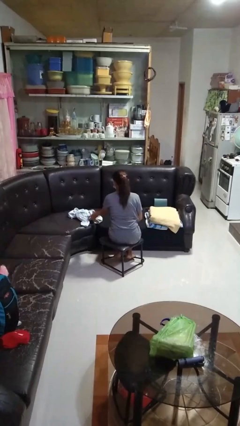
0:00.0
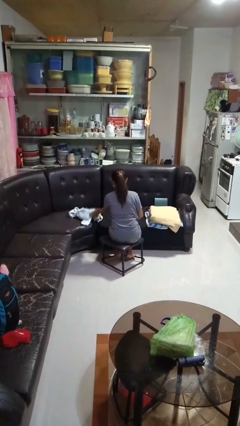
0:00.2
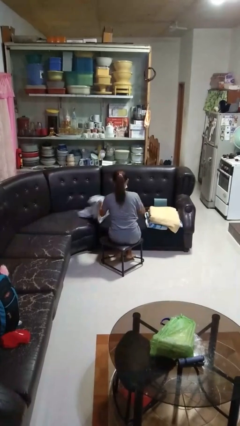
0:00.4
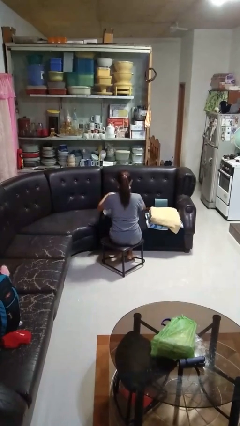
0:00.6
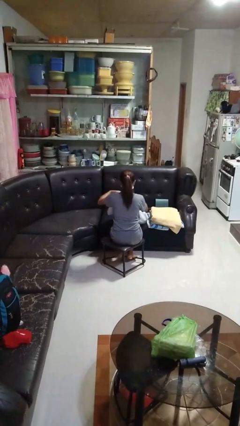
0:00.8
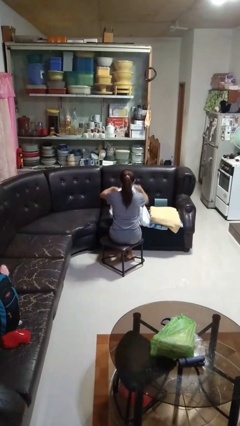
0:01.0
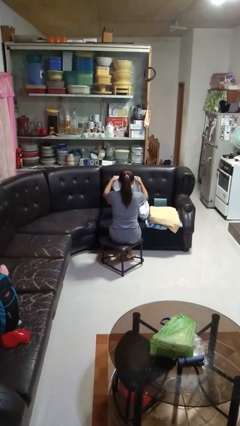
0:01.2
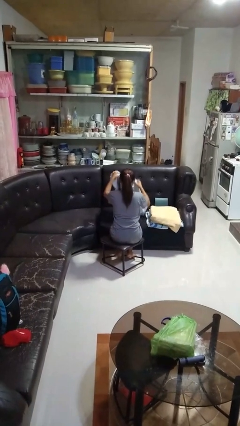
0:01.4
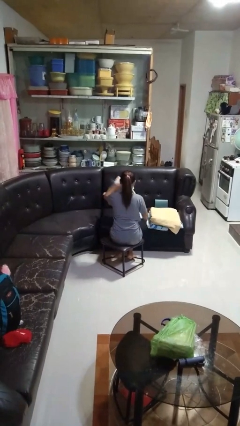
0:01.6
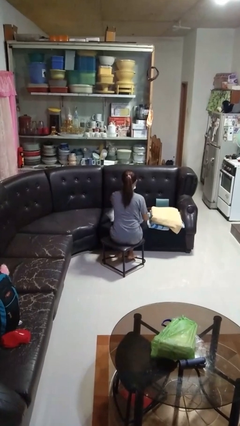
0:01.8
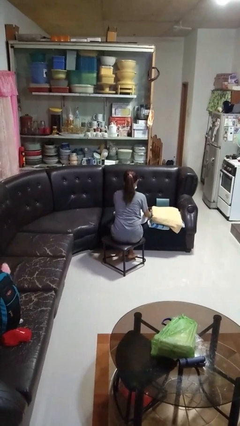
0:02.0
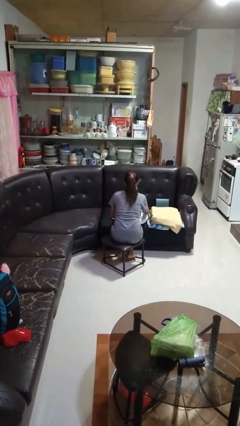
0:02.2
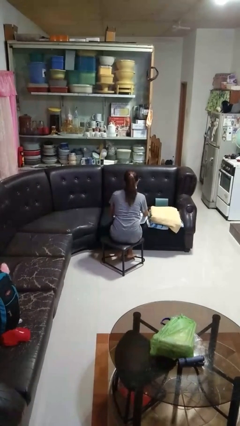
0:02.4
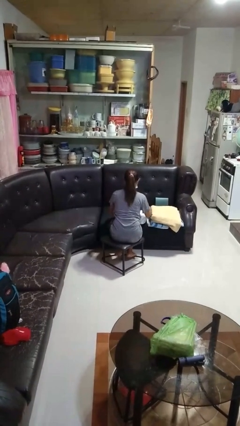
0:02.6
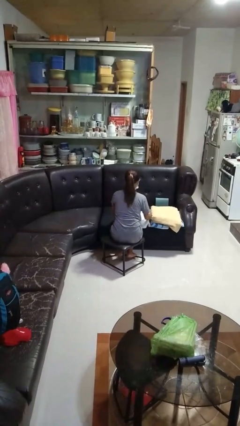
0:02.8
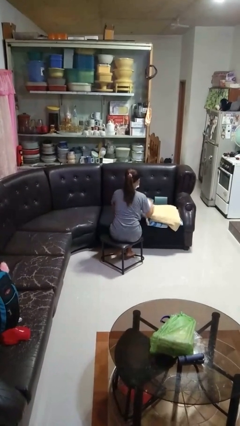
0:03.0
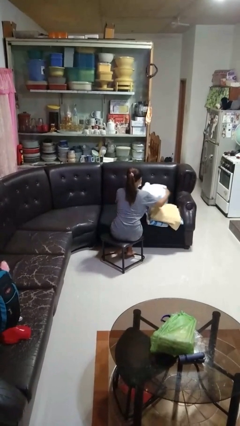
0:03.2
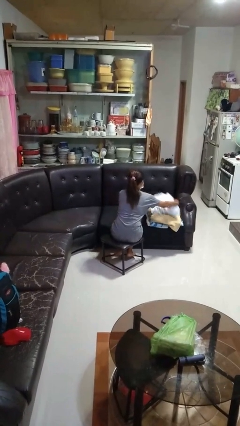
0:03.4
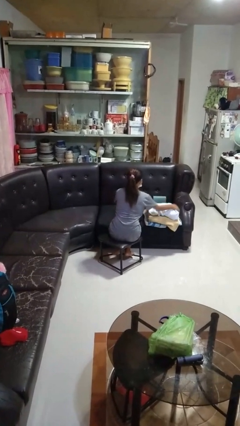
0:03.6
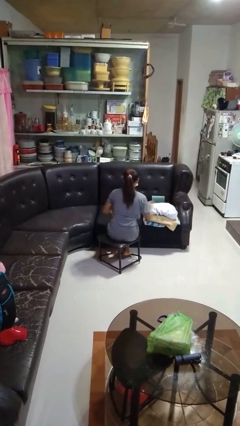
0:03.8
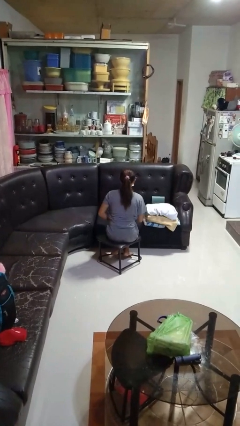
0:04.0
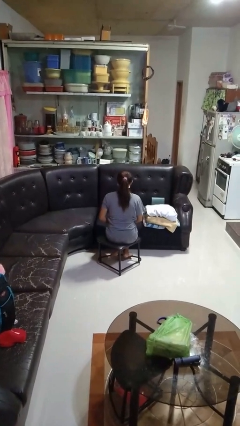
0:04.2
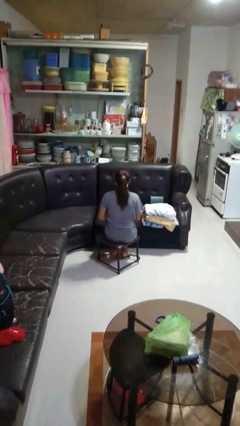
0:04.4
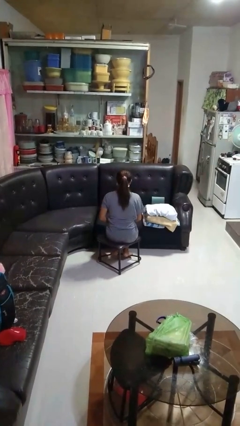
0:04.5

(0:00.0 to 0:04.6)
person folds towel

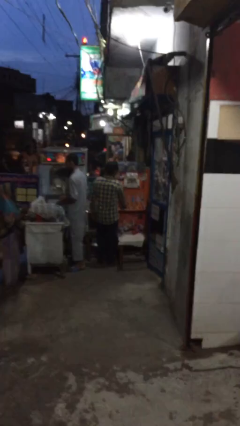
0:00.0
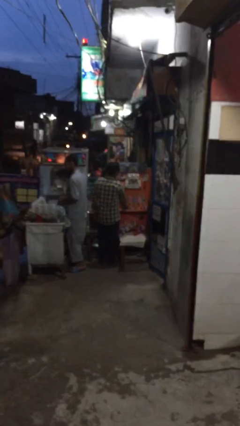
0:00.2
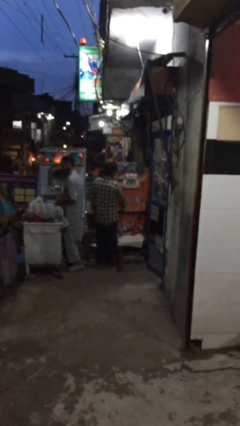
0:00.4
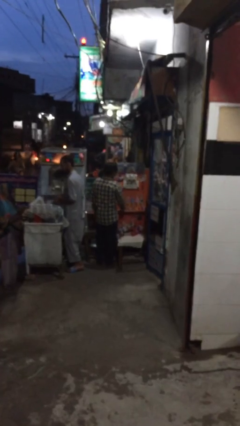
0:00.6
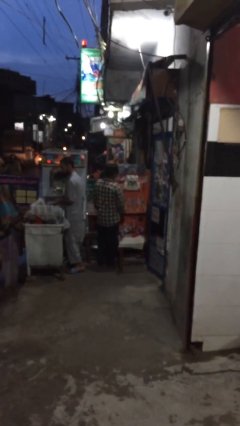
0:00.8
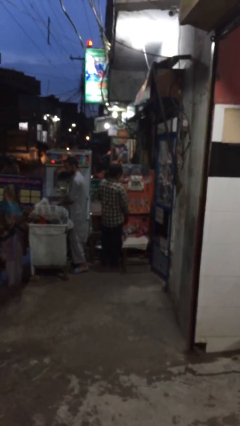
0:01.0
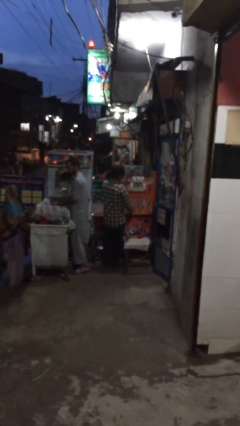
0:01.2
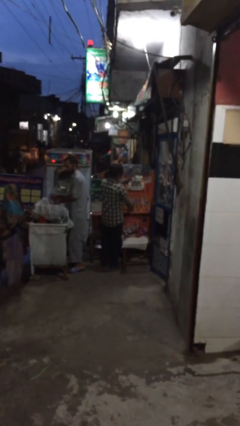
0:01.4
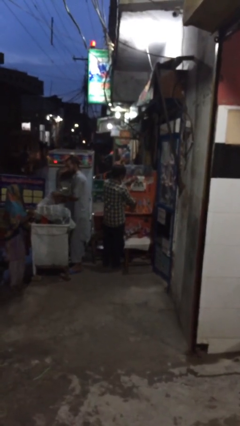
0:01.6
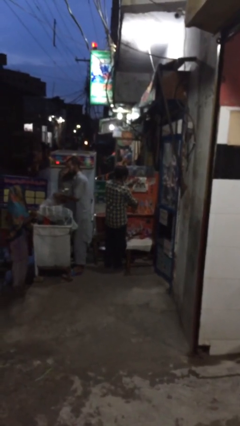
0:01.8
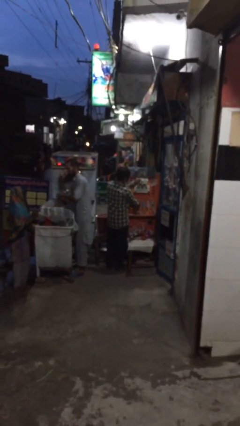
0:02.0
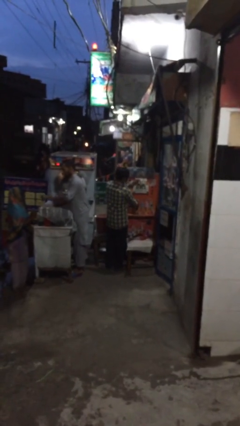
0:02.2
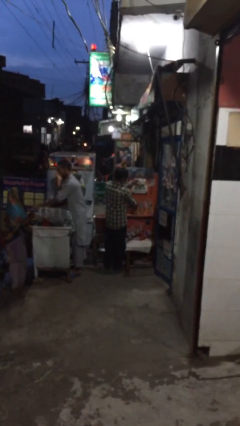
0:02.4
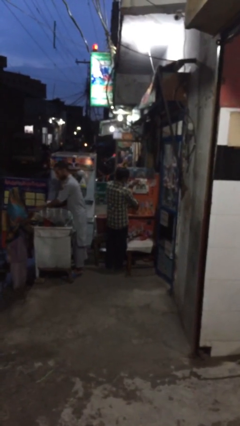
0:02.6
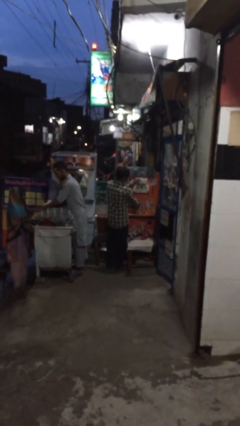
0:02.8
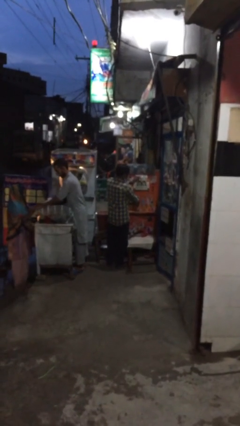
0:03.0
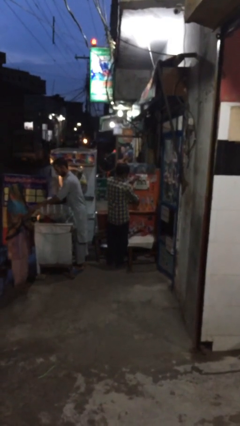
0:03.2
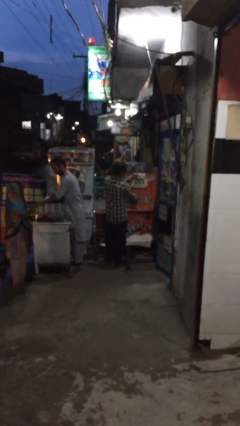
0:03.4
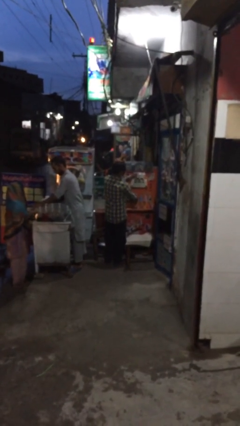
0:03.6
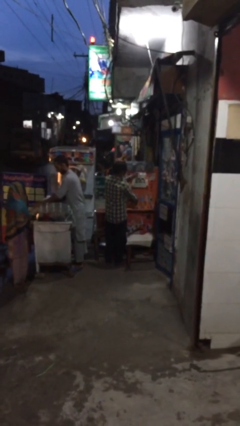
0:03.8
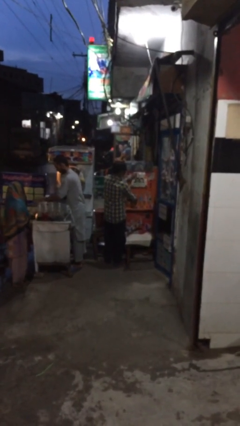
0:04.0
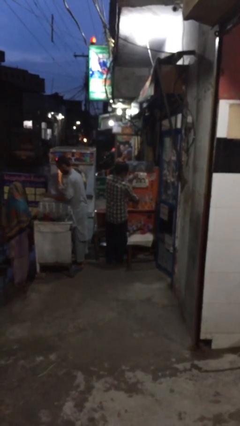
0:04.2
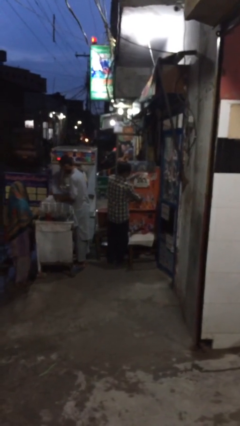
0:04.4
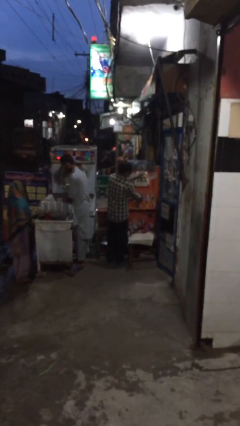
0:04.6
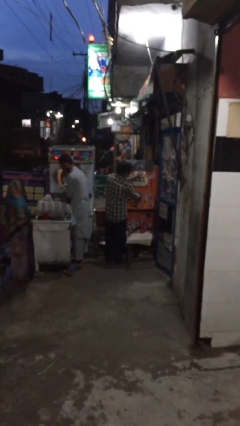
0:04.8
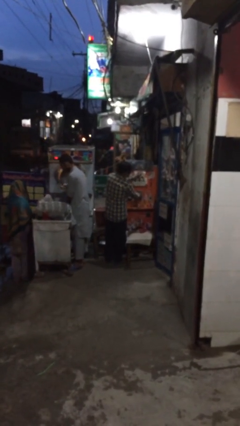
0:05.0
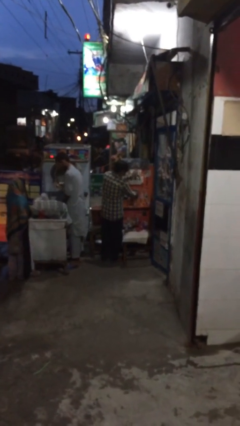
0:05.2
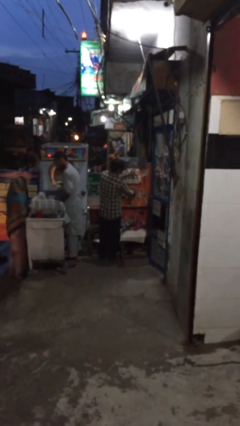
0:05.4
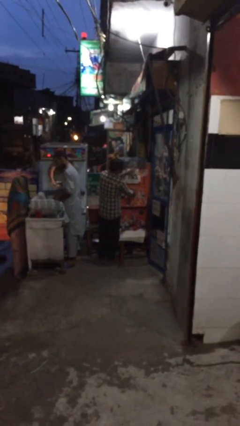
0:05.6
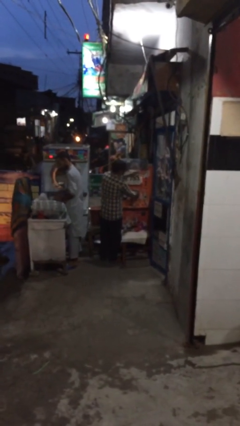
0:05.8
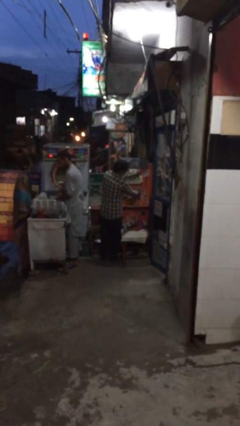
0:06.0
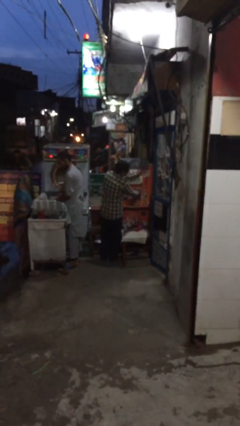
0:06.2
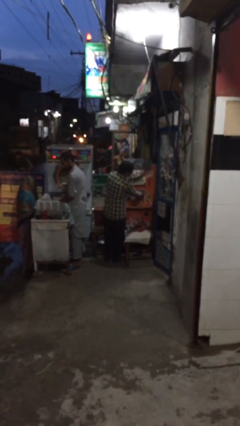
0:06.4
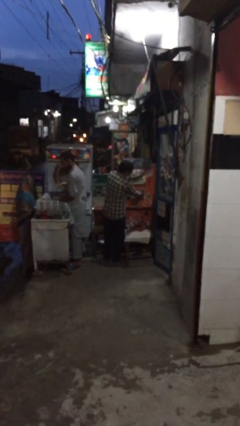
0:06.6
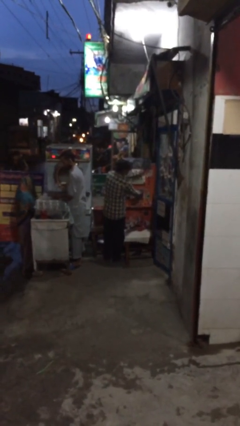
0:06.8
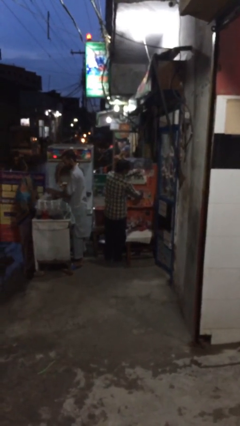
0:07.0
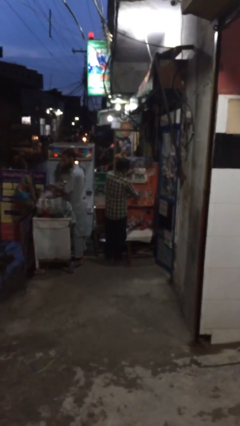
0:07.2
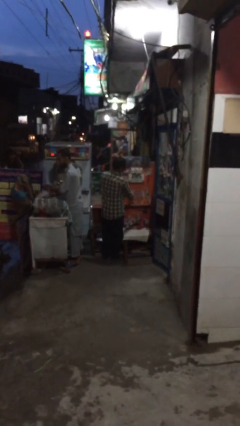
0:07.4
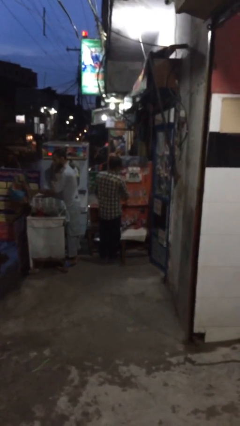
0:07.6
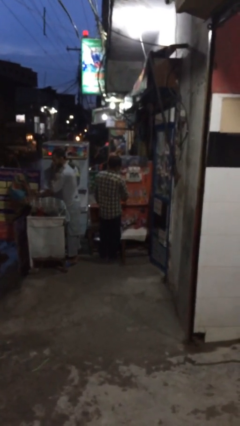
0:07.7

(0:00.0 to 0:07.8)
person purchases from machine

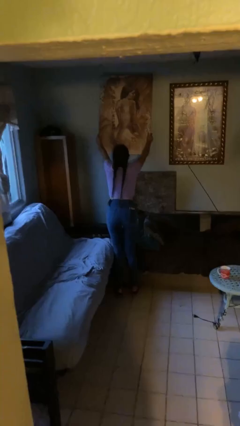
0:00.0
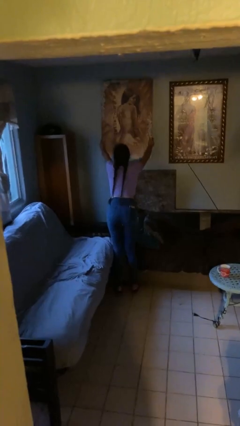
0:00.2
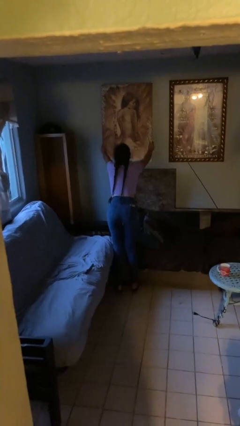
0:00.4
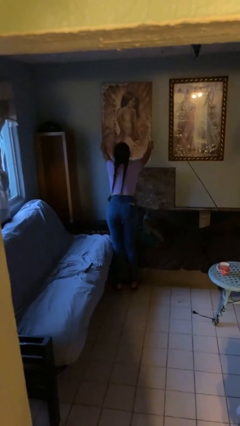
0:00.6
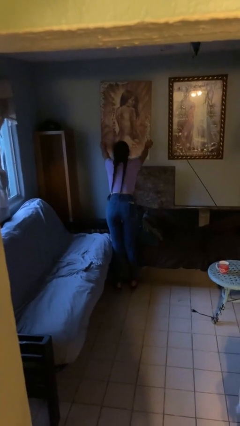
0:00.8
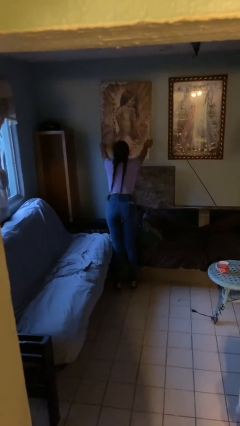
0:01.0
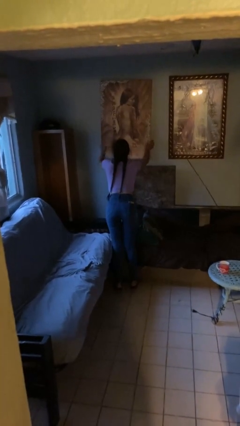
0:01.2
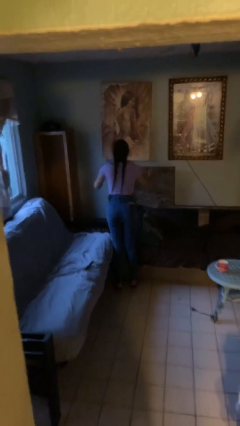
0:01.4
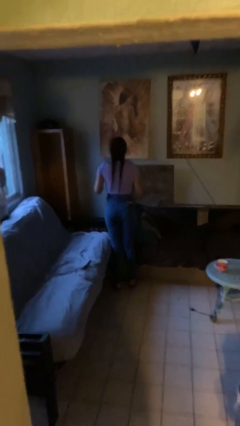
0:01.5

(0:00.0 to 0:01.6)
person puts up picture frame

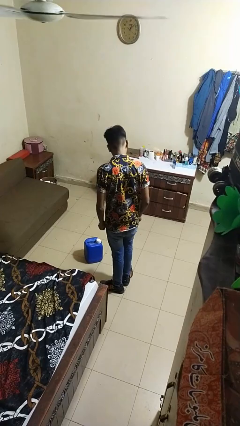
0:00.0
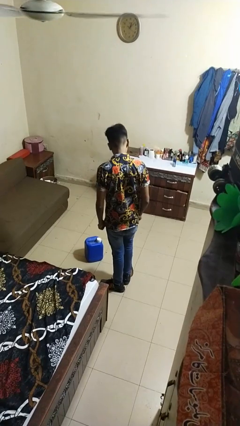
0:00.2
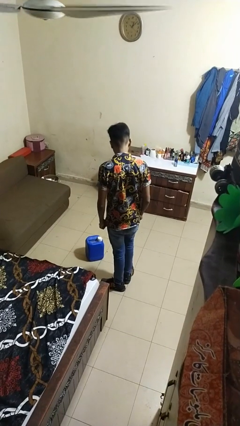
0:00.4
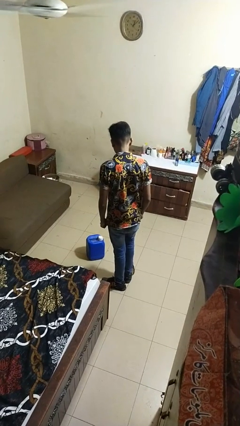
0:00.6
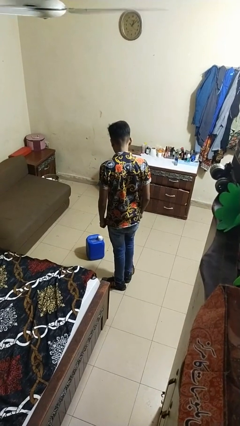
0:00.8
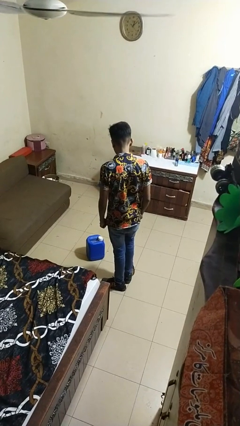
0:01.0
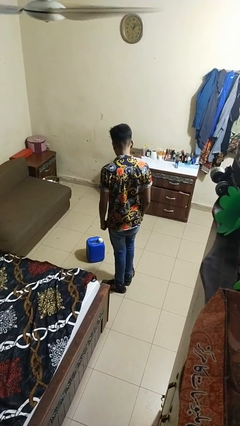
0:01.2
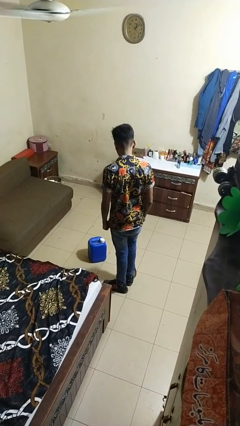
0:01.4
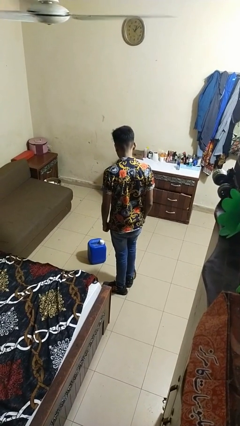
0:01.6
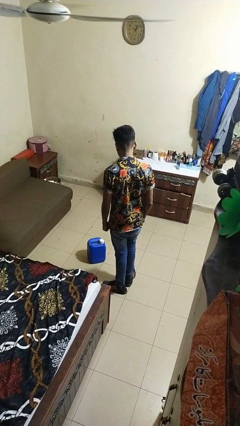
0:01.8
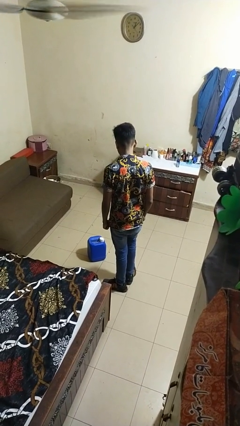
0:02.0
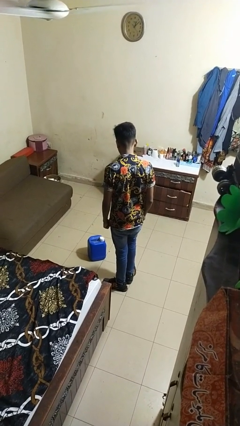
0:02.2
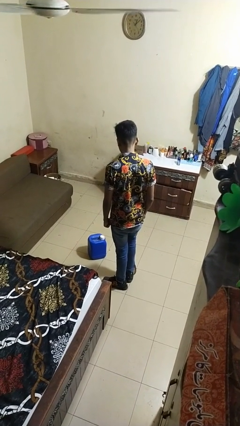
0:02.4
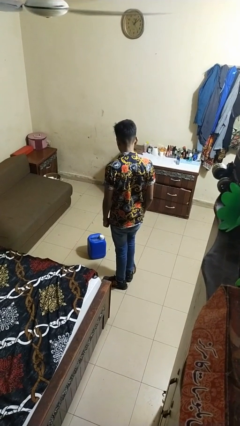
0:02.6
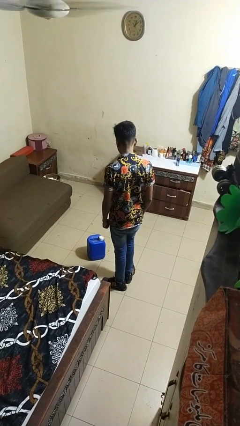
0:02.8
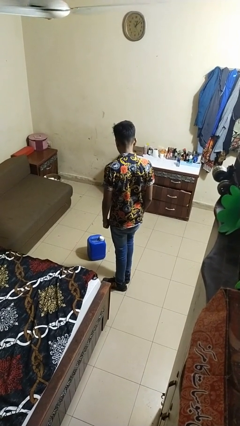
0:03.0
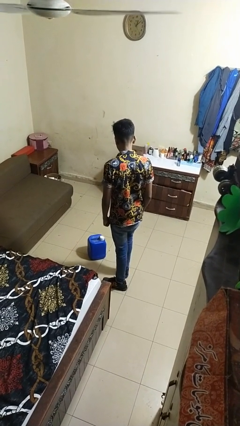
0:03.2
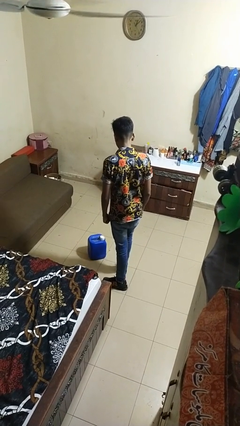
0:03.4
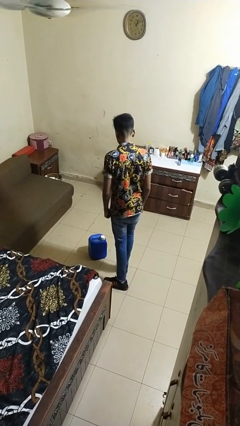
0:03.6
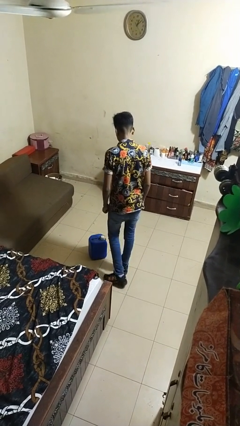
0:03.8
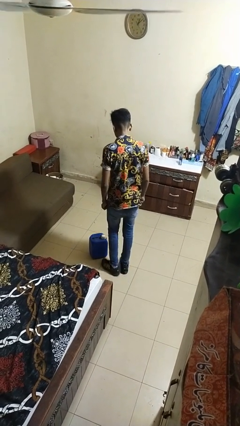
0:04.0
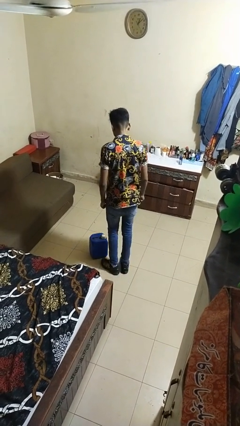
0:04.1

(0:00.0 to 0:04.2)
person trips on object on floor
